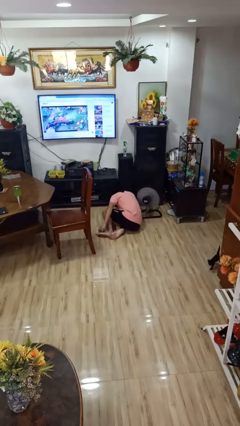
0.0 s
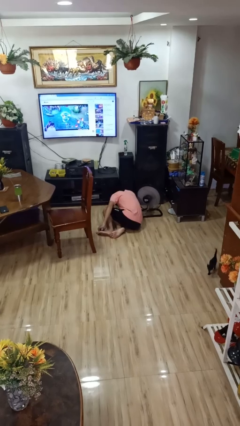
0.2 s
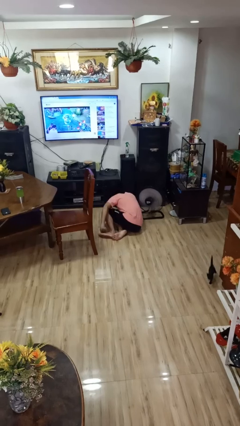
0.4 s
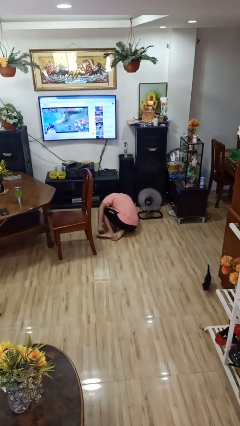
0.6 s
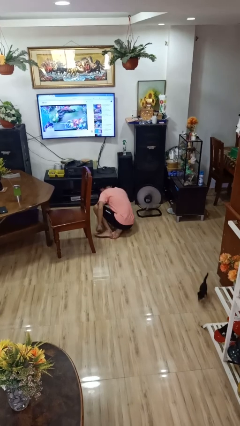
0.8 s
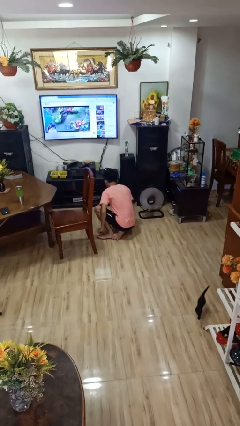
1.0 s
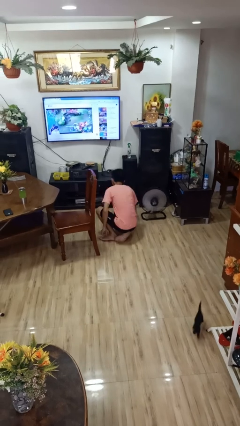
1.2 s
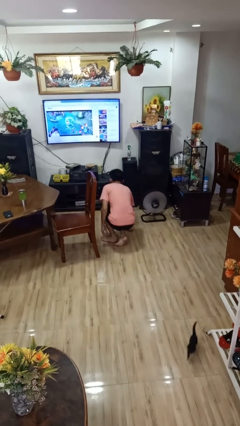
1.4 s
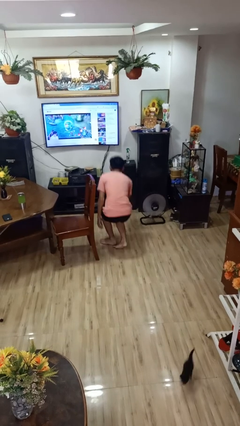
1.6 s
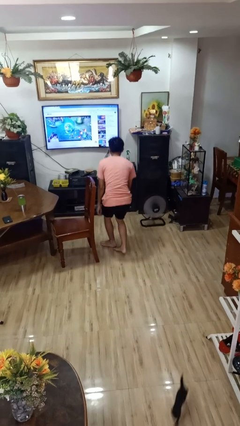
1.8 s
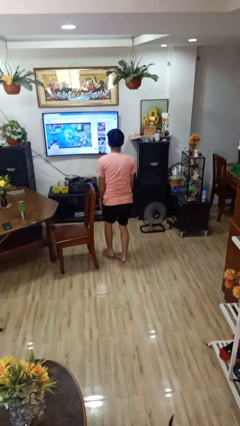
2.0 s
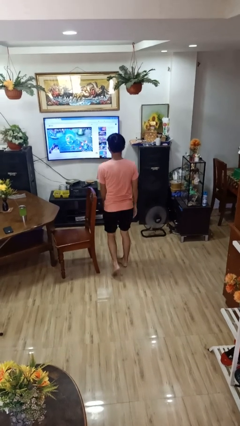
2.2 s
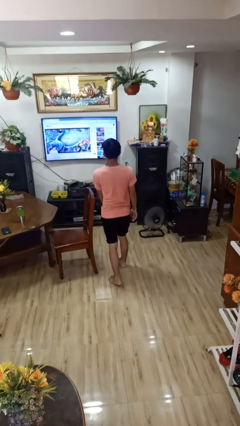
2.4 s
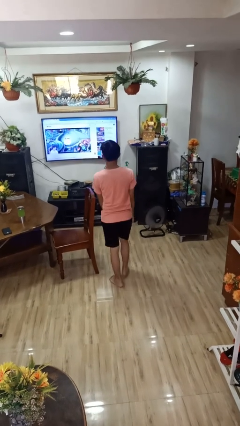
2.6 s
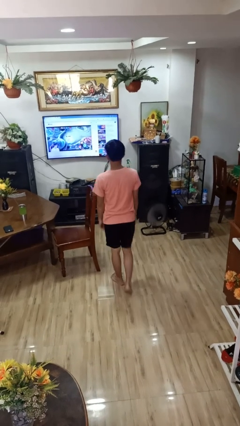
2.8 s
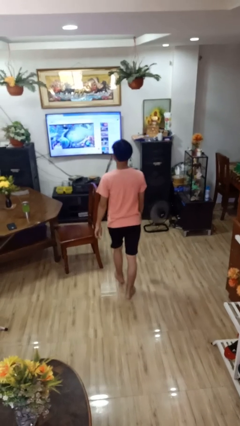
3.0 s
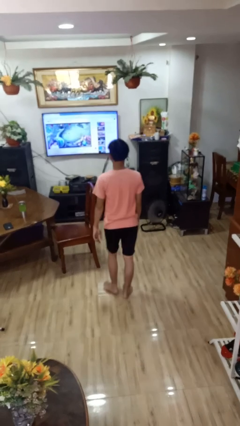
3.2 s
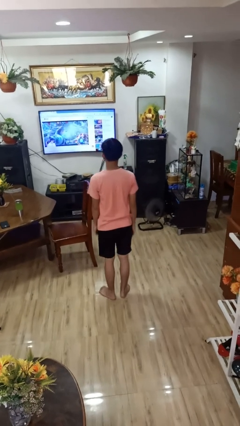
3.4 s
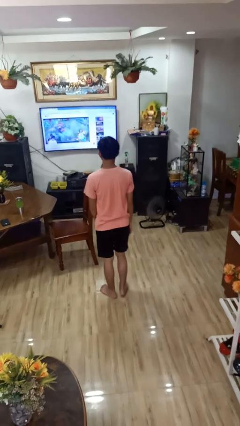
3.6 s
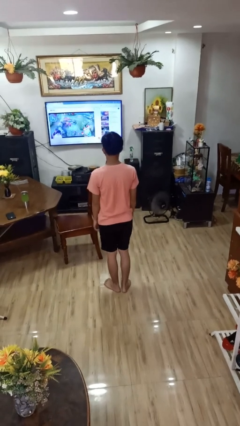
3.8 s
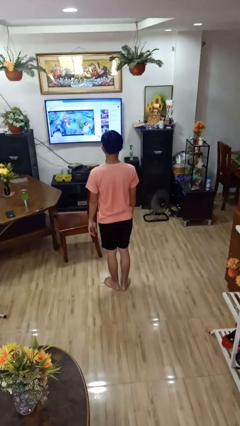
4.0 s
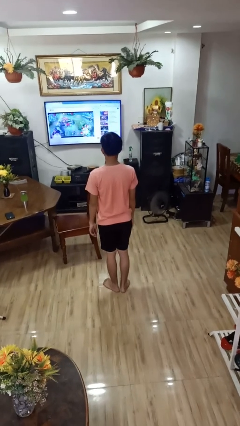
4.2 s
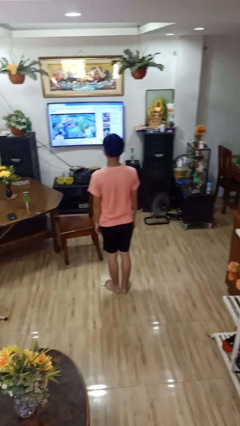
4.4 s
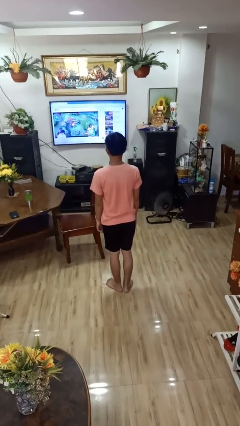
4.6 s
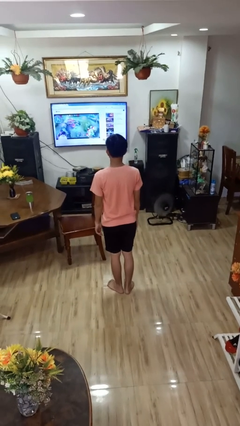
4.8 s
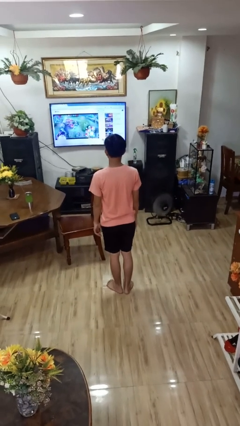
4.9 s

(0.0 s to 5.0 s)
person stands up from floor

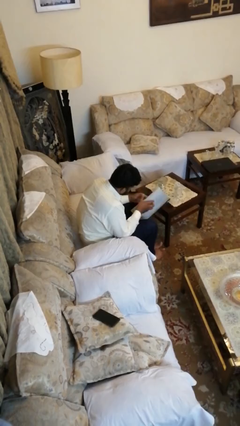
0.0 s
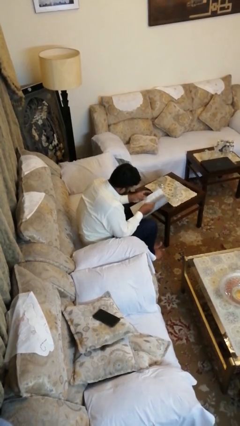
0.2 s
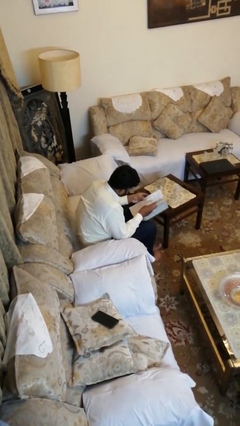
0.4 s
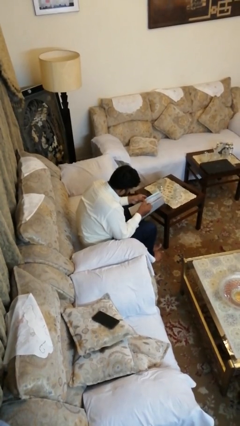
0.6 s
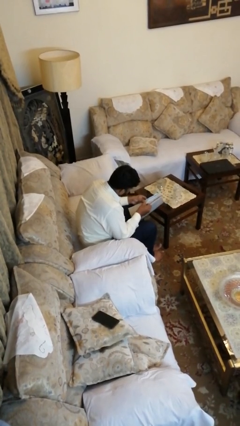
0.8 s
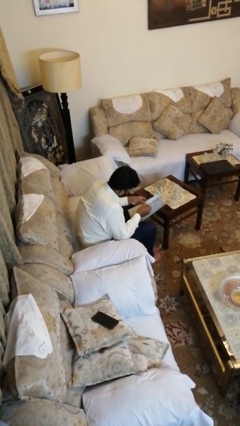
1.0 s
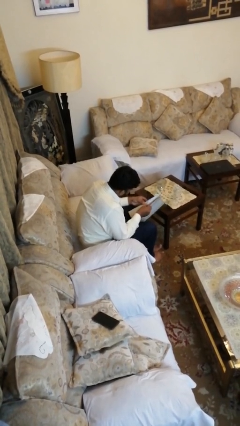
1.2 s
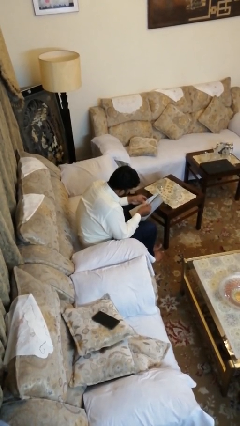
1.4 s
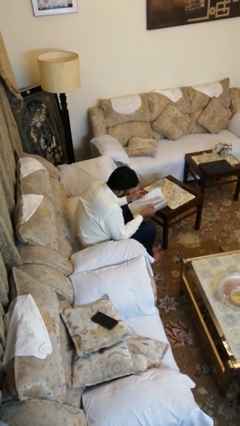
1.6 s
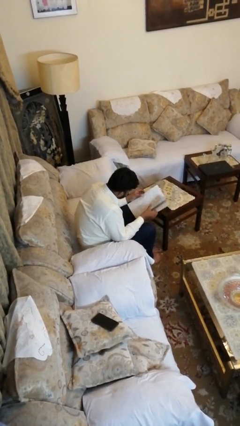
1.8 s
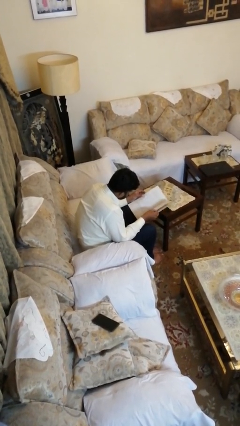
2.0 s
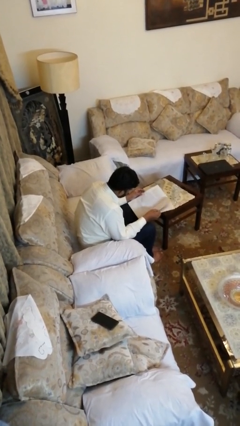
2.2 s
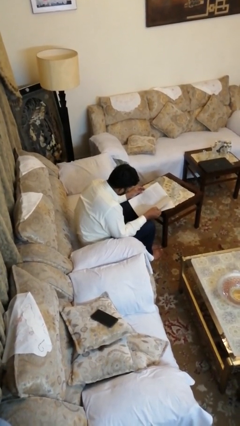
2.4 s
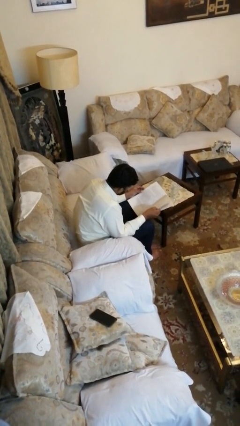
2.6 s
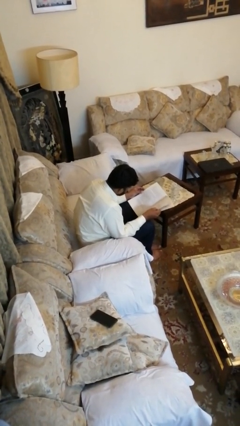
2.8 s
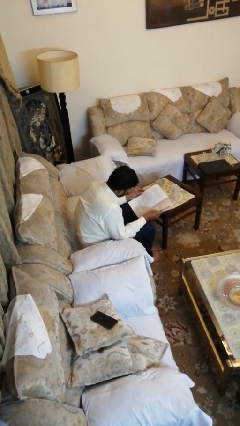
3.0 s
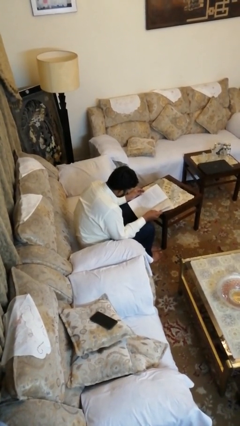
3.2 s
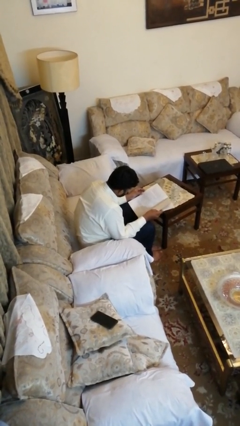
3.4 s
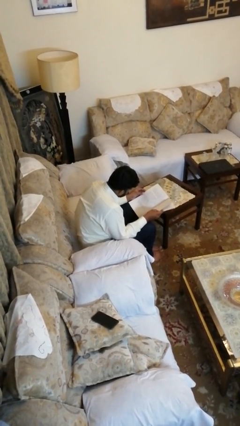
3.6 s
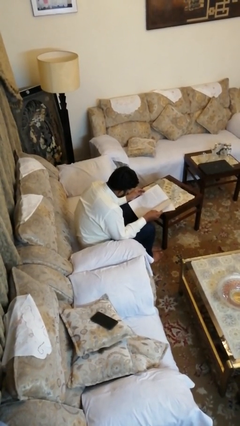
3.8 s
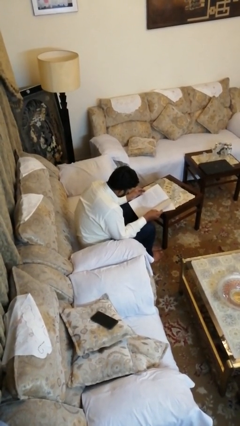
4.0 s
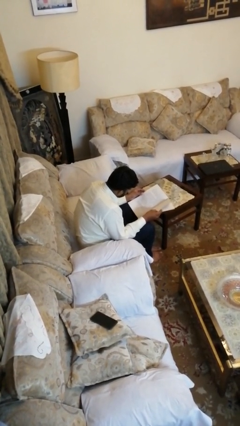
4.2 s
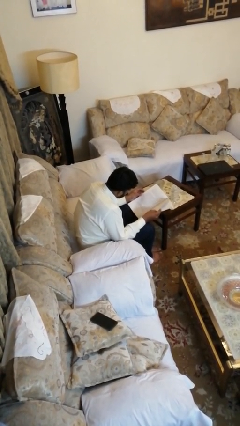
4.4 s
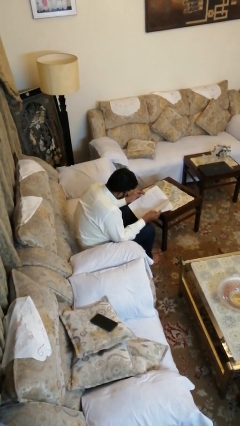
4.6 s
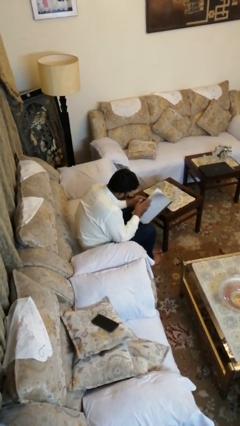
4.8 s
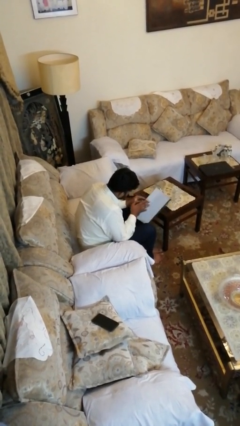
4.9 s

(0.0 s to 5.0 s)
person reads magazine

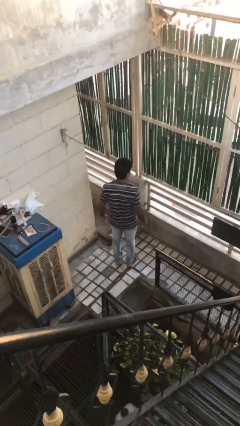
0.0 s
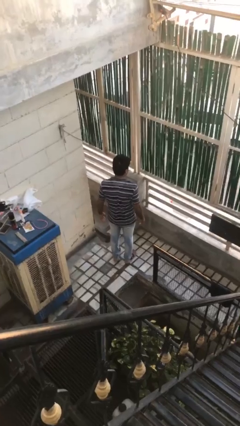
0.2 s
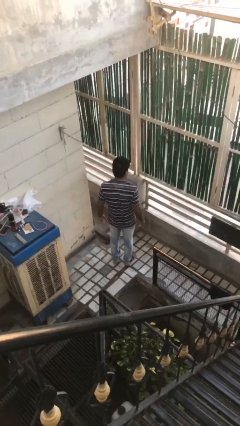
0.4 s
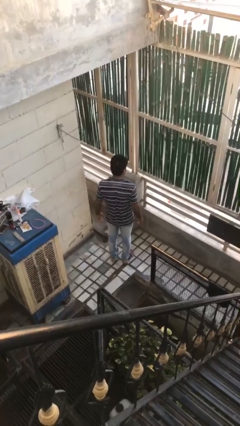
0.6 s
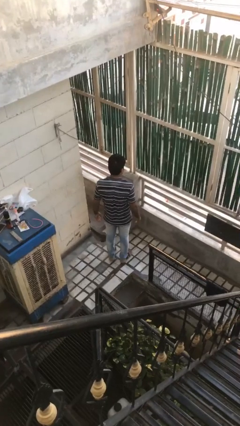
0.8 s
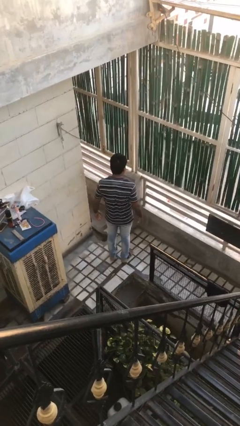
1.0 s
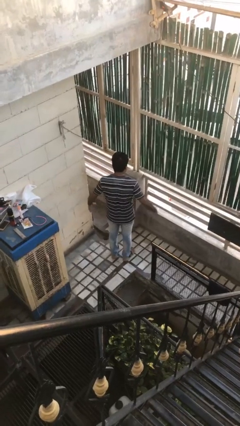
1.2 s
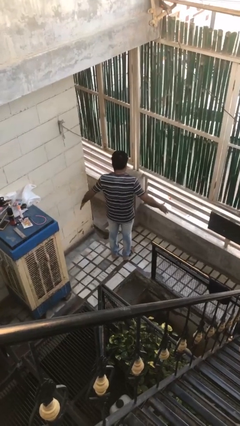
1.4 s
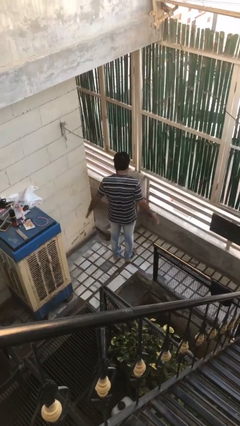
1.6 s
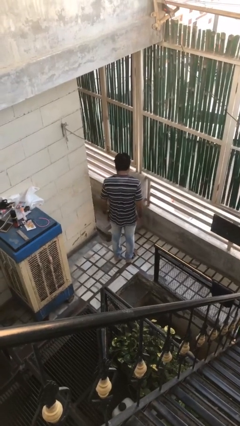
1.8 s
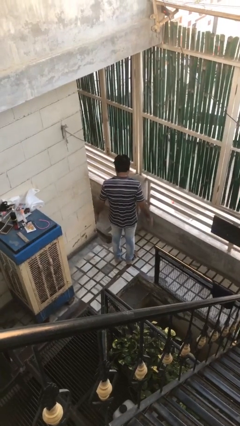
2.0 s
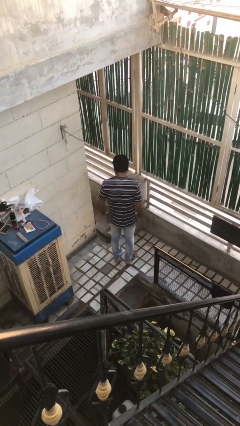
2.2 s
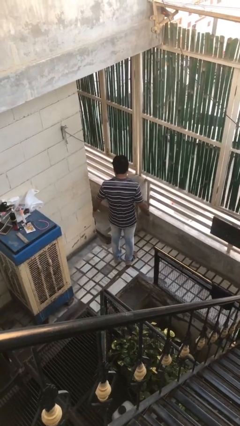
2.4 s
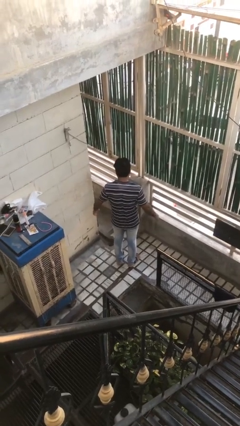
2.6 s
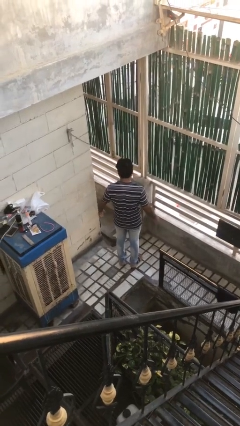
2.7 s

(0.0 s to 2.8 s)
person slaps hands on thighs

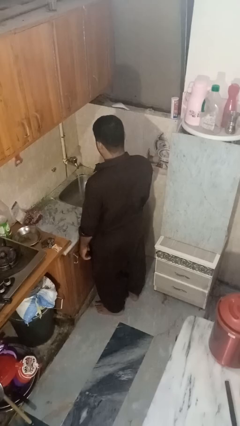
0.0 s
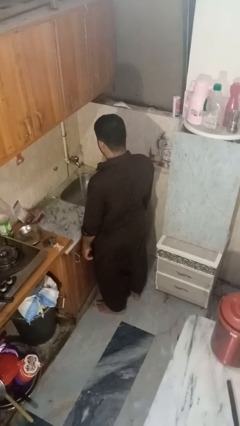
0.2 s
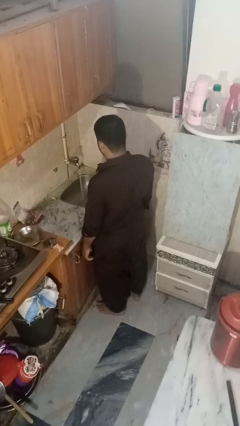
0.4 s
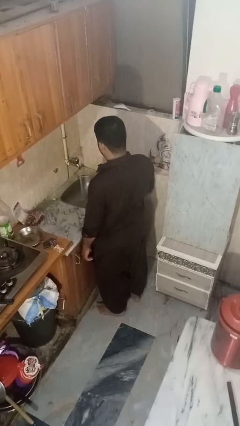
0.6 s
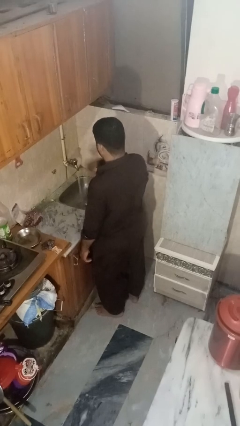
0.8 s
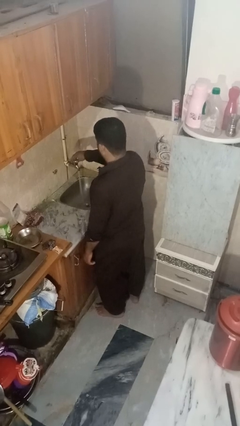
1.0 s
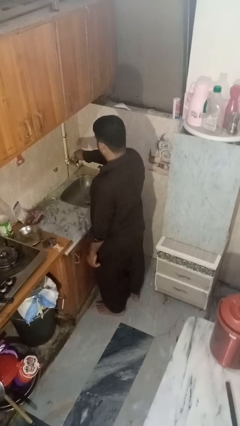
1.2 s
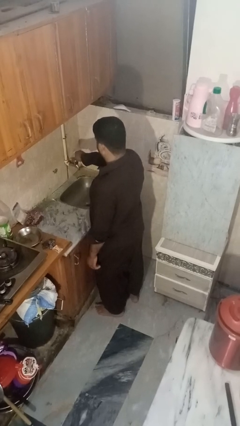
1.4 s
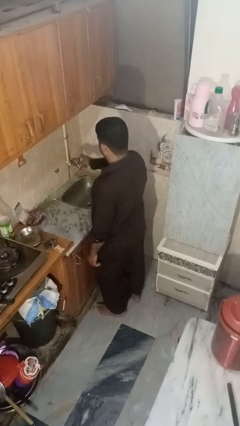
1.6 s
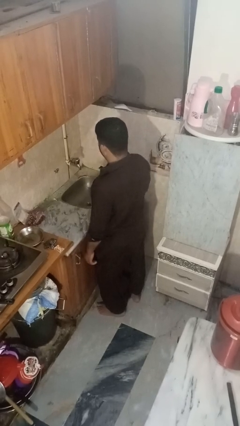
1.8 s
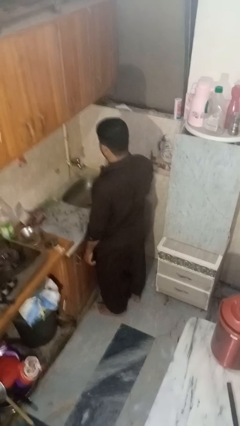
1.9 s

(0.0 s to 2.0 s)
person turns off faucet

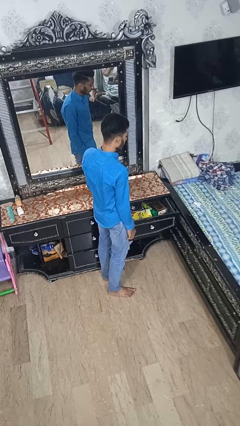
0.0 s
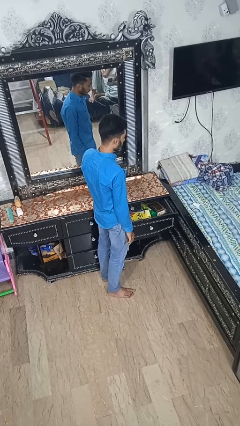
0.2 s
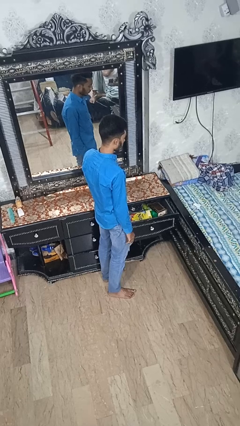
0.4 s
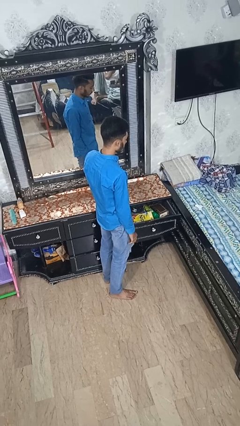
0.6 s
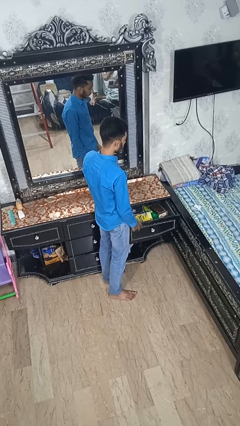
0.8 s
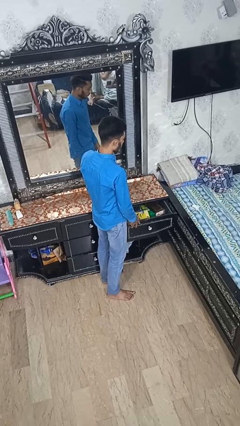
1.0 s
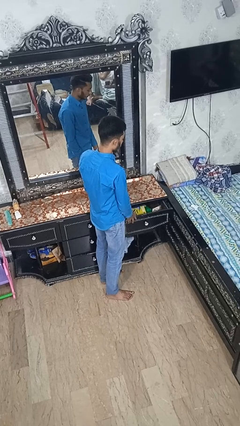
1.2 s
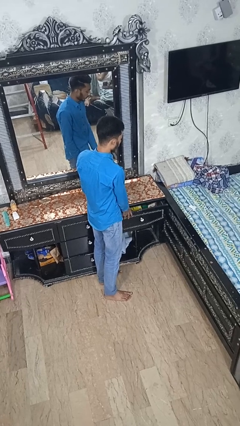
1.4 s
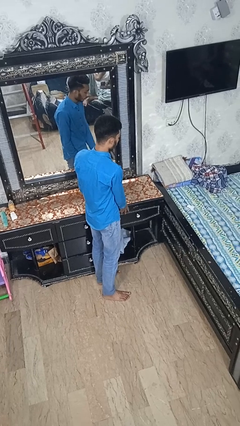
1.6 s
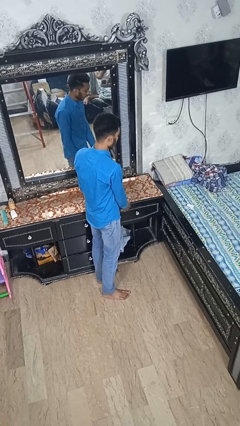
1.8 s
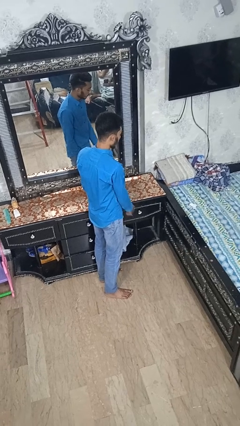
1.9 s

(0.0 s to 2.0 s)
person closes dresser drawer

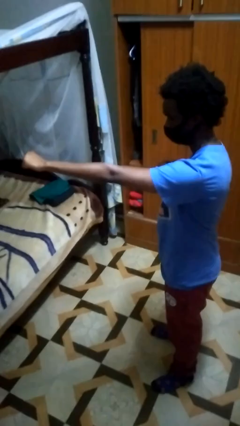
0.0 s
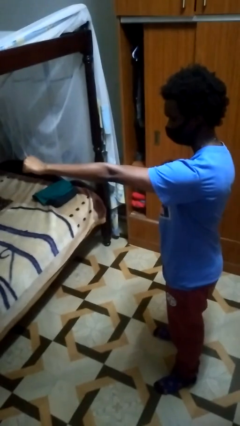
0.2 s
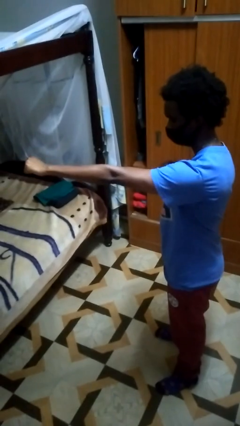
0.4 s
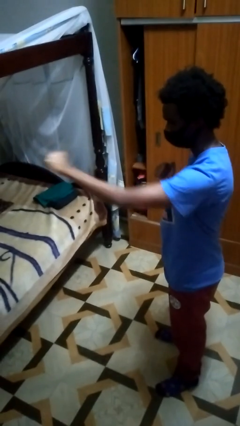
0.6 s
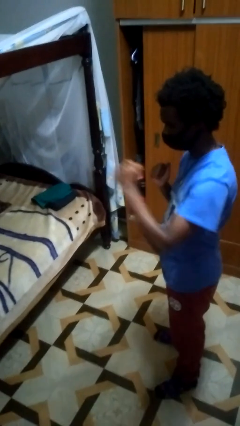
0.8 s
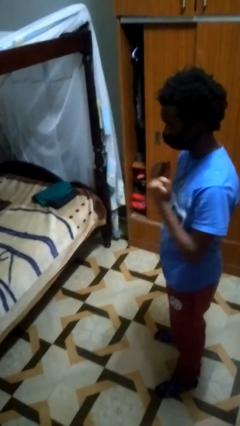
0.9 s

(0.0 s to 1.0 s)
person punches

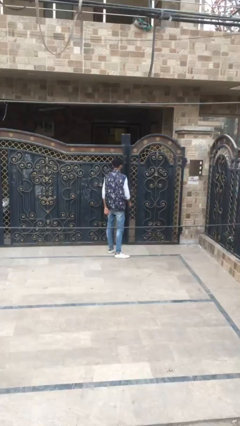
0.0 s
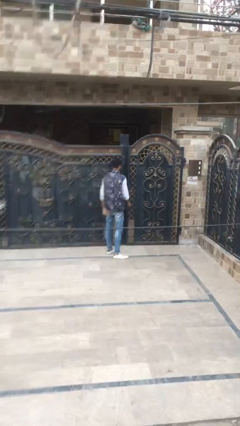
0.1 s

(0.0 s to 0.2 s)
person opens facility door
